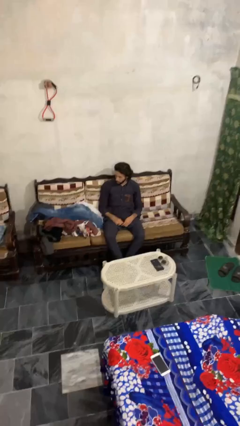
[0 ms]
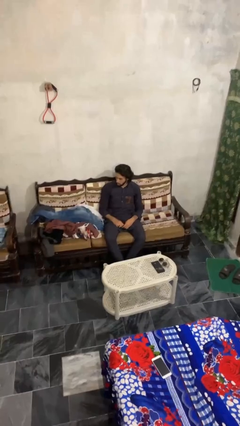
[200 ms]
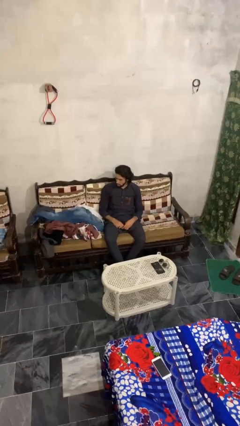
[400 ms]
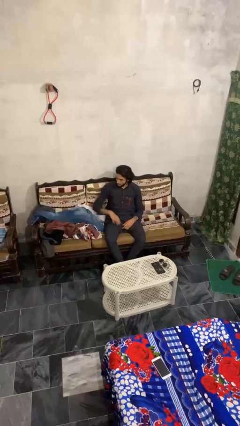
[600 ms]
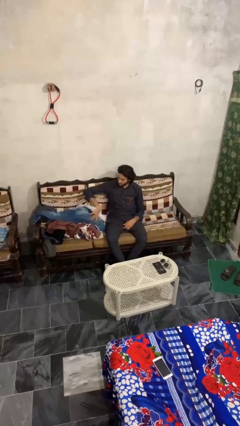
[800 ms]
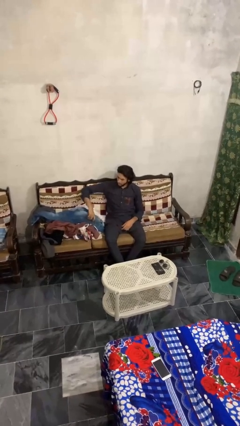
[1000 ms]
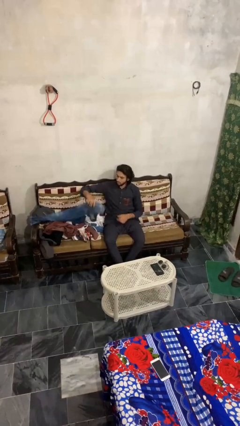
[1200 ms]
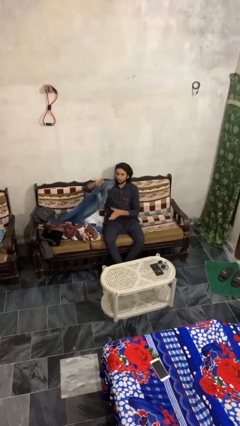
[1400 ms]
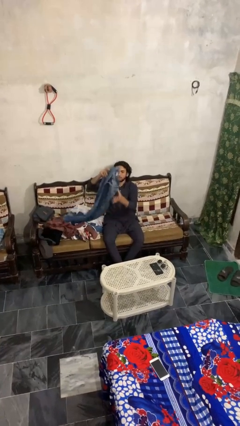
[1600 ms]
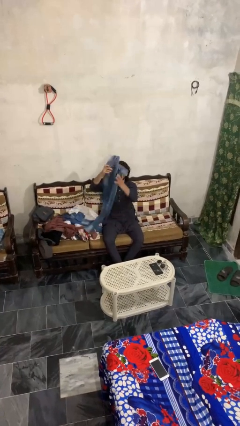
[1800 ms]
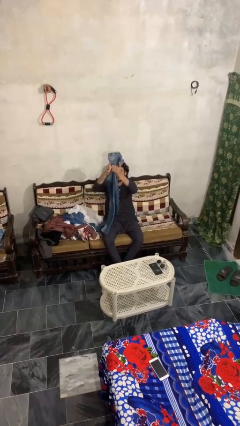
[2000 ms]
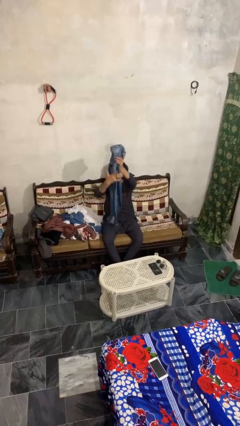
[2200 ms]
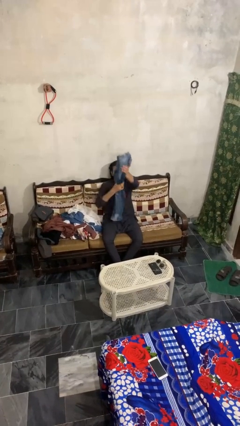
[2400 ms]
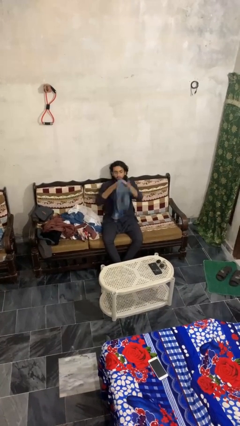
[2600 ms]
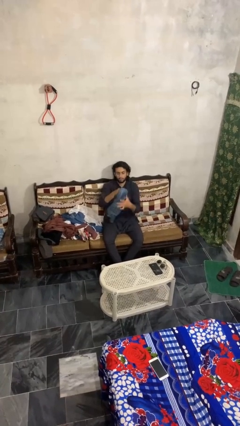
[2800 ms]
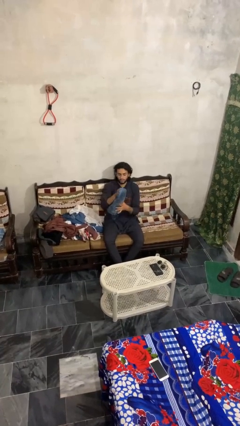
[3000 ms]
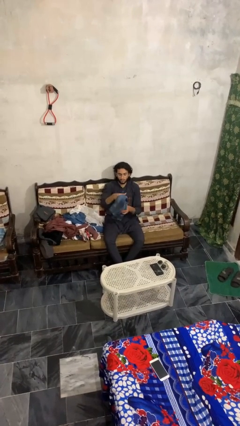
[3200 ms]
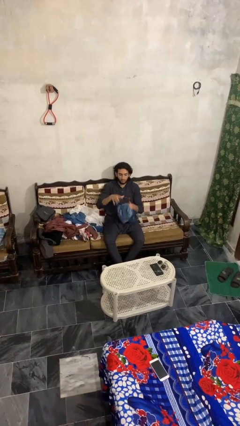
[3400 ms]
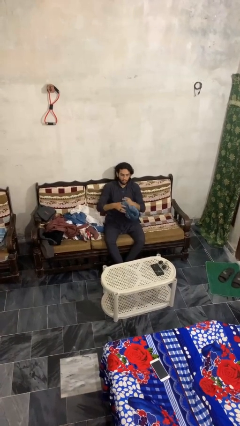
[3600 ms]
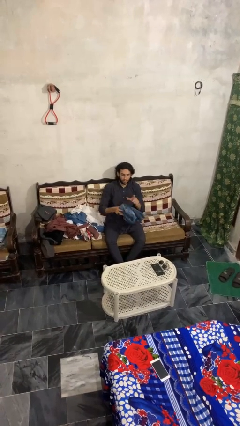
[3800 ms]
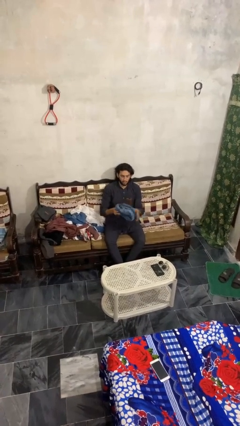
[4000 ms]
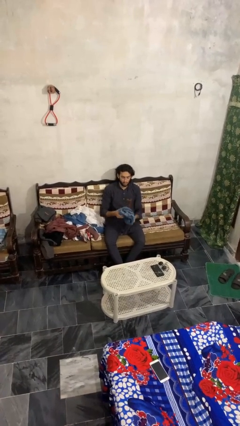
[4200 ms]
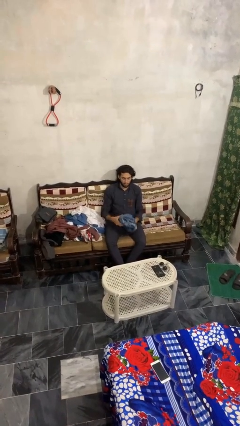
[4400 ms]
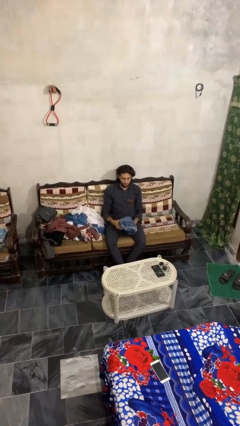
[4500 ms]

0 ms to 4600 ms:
person folds pants

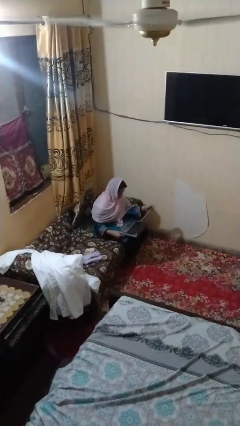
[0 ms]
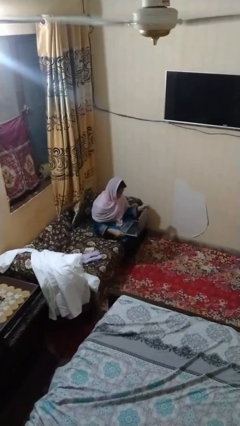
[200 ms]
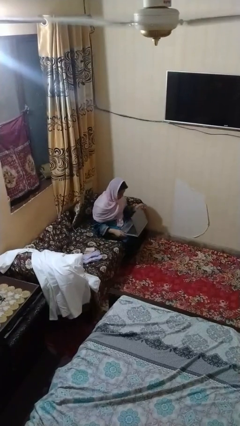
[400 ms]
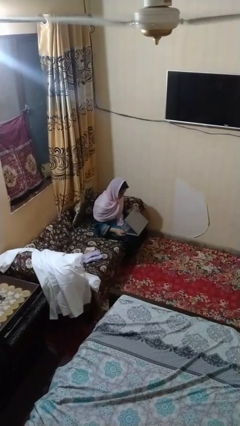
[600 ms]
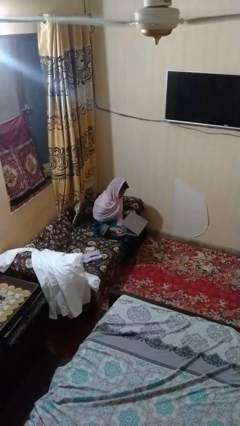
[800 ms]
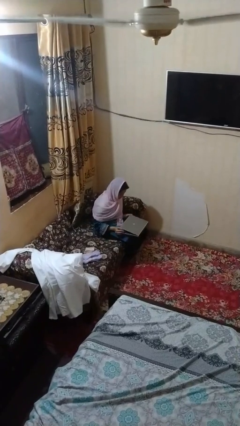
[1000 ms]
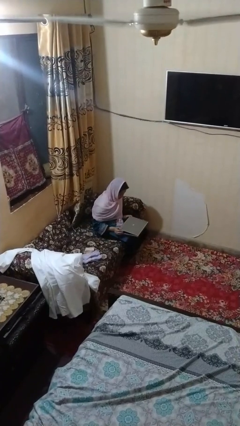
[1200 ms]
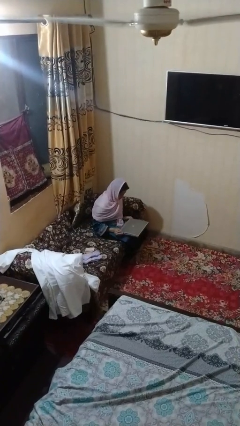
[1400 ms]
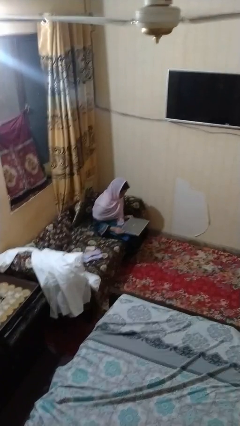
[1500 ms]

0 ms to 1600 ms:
person closes laptop

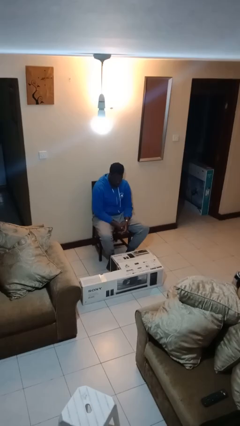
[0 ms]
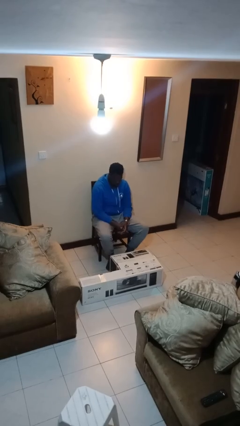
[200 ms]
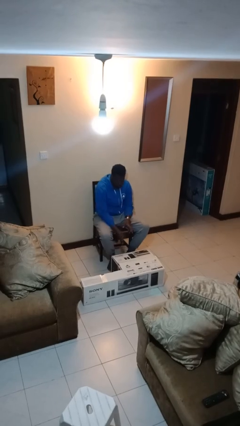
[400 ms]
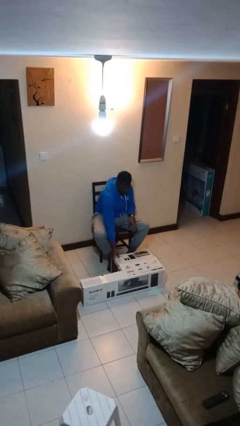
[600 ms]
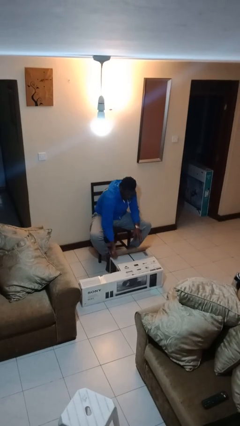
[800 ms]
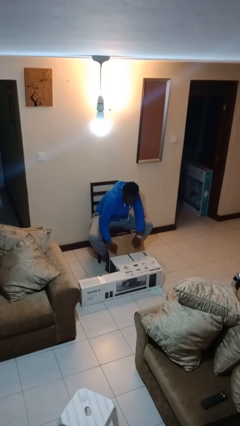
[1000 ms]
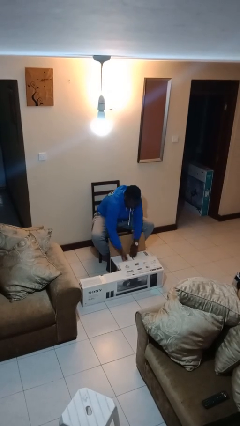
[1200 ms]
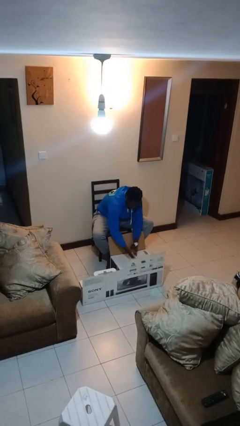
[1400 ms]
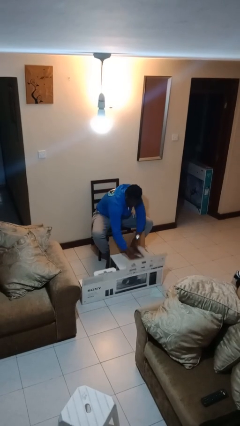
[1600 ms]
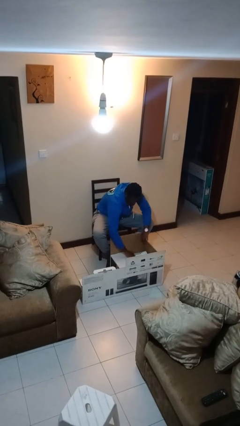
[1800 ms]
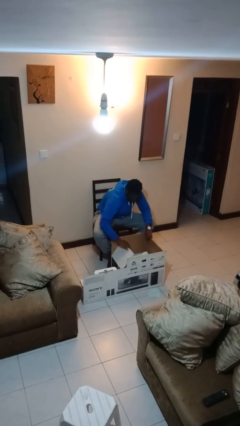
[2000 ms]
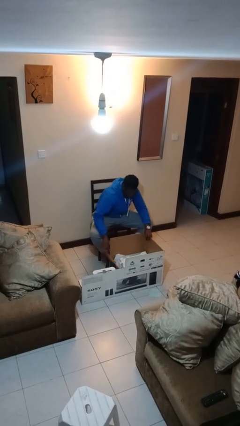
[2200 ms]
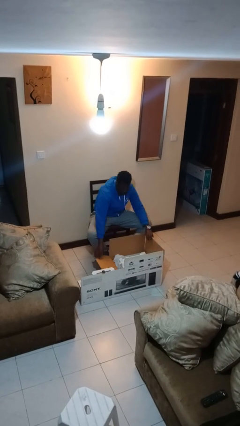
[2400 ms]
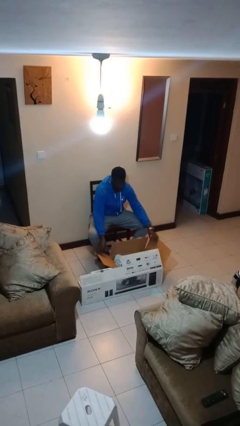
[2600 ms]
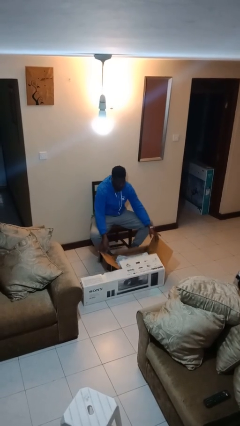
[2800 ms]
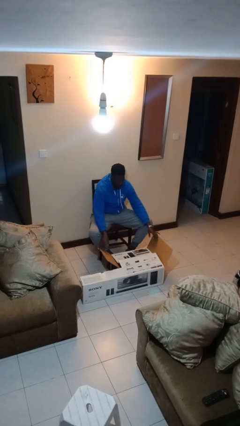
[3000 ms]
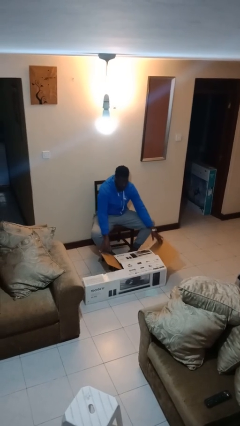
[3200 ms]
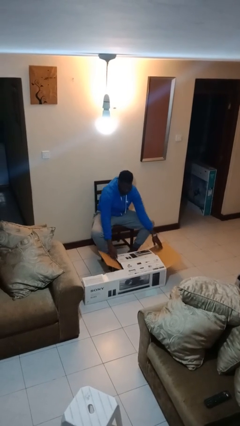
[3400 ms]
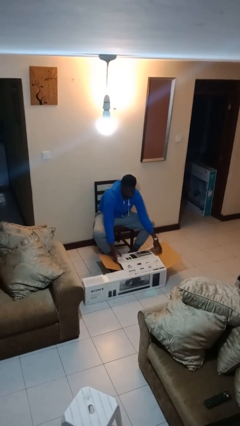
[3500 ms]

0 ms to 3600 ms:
person opens box

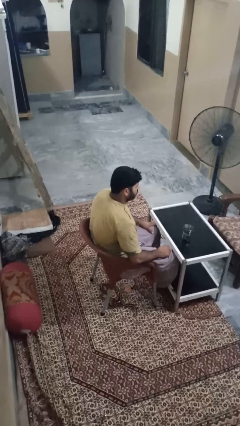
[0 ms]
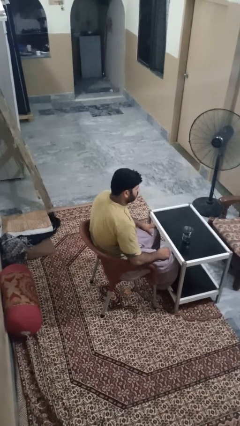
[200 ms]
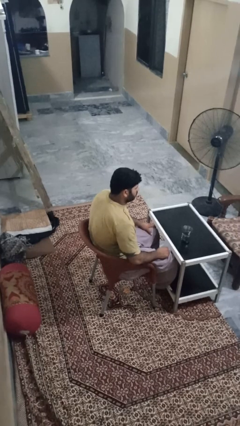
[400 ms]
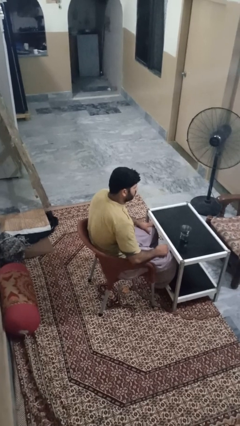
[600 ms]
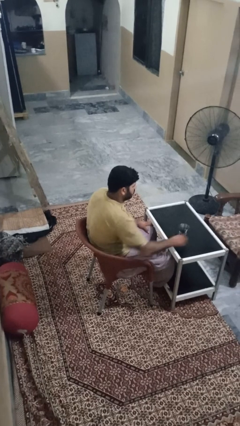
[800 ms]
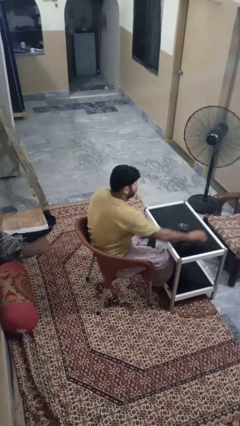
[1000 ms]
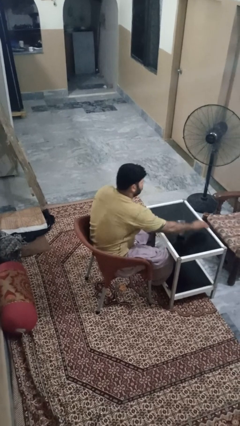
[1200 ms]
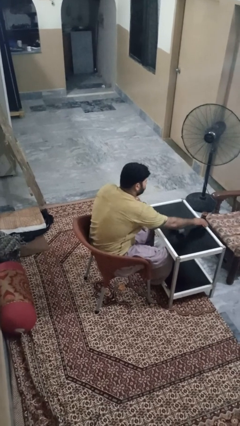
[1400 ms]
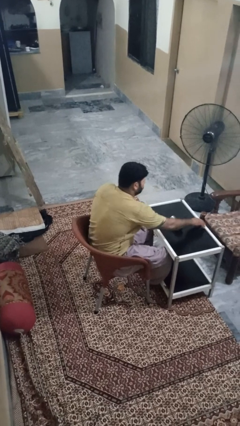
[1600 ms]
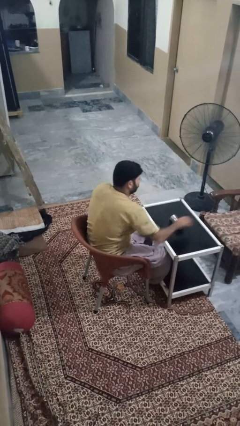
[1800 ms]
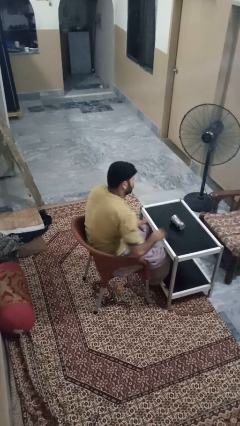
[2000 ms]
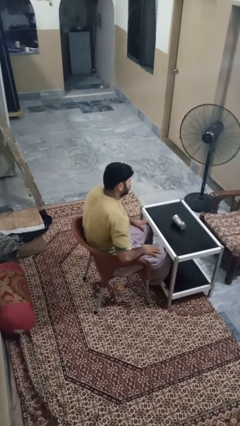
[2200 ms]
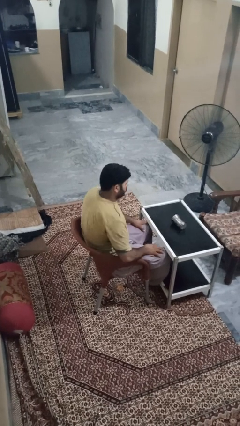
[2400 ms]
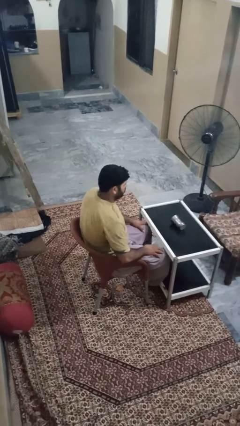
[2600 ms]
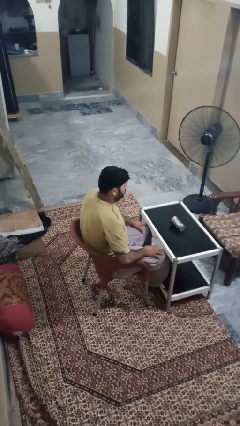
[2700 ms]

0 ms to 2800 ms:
person knocks over glass

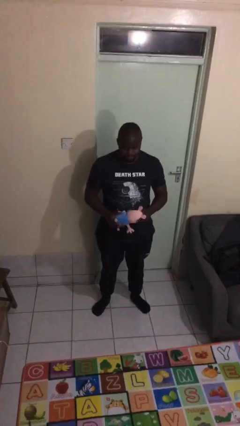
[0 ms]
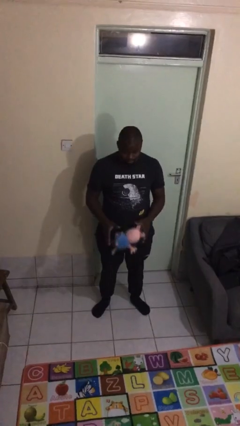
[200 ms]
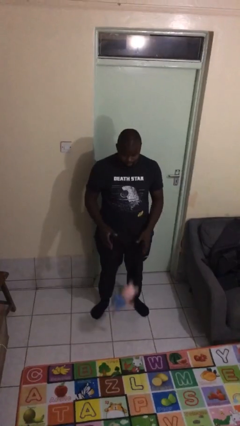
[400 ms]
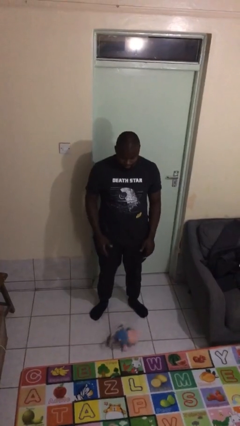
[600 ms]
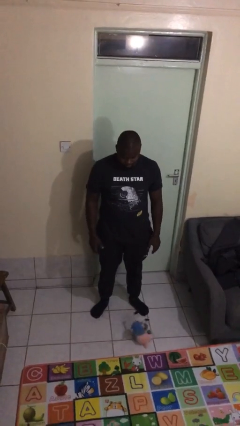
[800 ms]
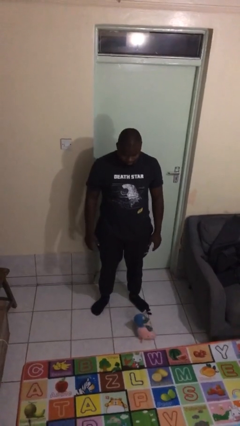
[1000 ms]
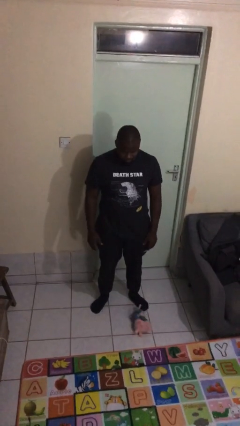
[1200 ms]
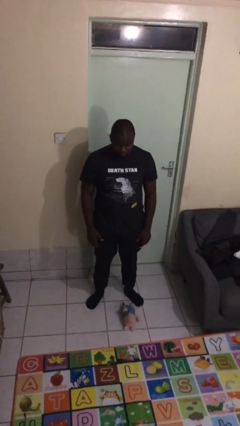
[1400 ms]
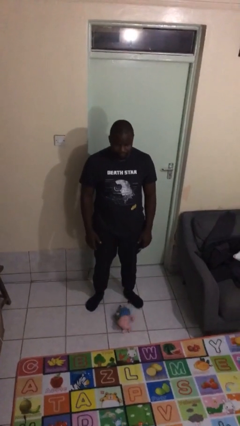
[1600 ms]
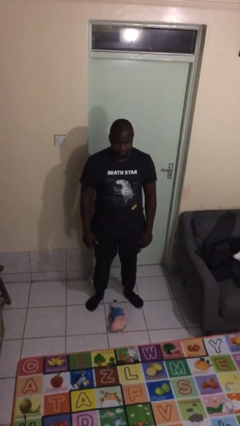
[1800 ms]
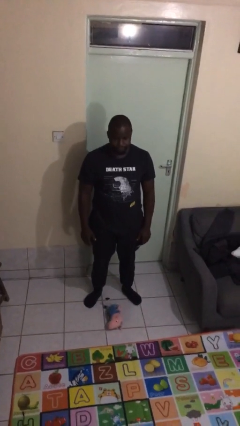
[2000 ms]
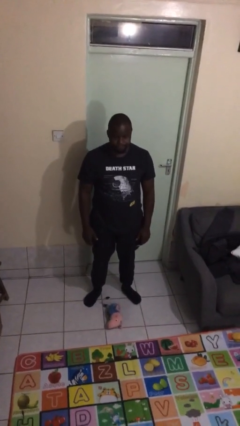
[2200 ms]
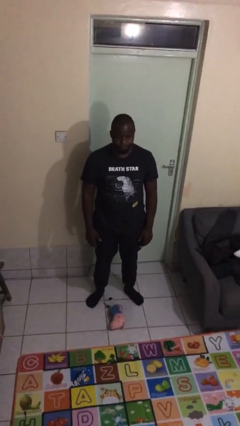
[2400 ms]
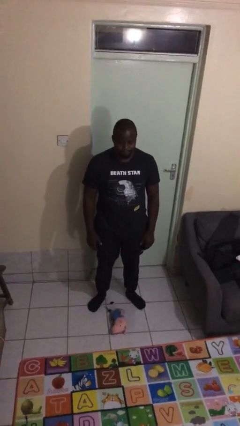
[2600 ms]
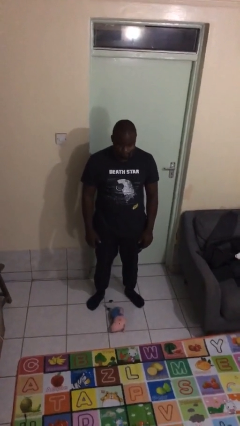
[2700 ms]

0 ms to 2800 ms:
person drops object

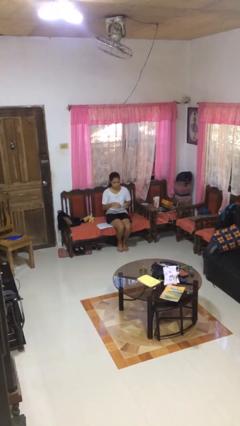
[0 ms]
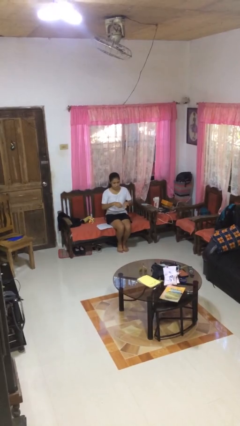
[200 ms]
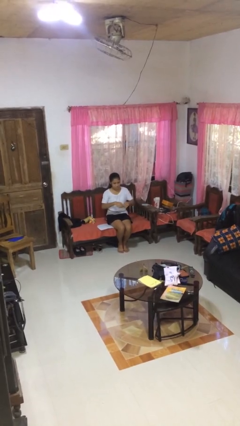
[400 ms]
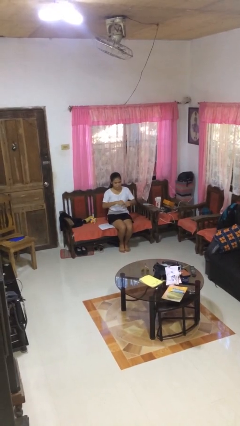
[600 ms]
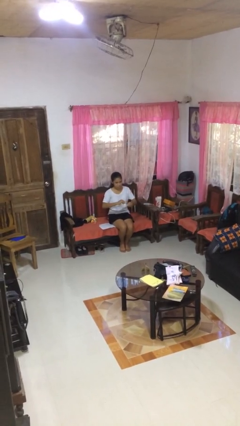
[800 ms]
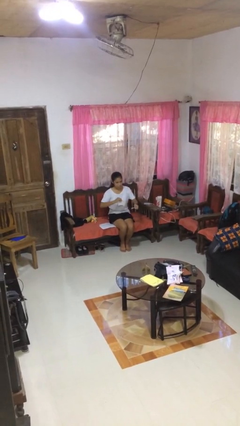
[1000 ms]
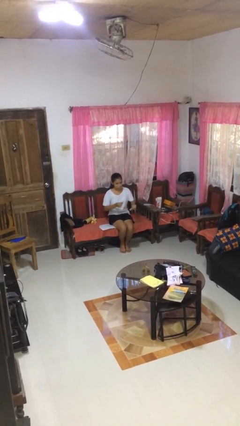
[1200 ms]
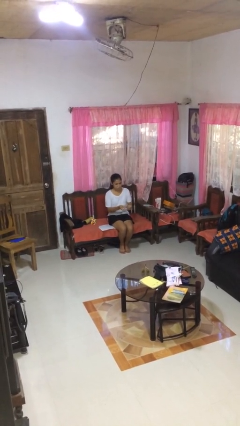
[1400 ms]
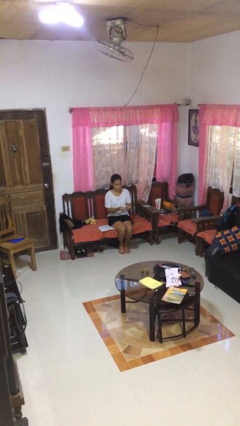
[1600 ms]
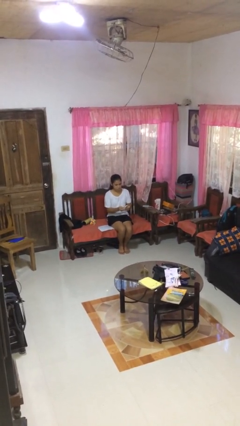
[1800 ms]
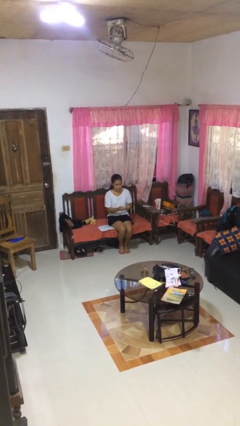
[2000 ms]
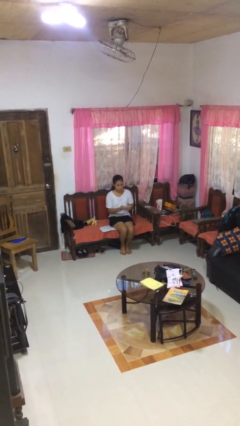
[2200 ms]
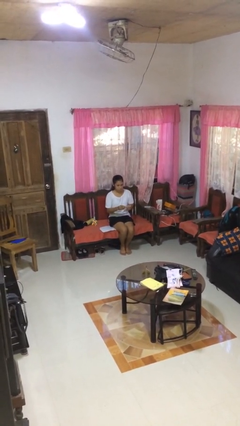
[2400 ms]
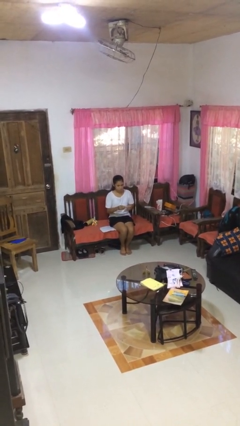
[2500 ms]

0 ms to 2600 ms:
person tears paper
